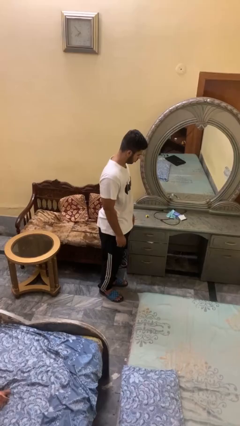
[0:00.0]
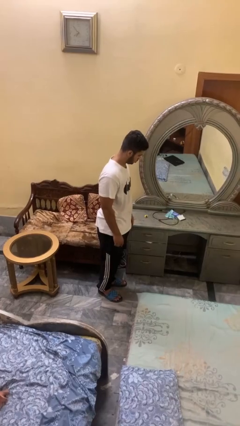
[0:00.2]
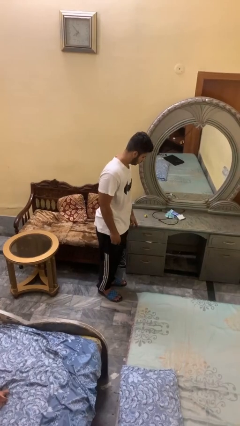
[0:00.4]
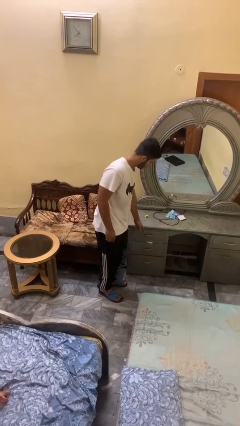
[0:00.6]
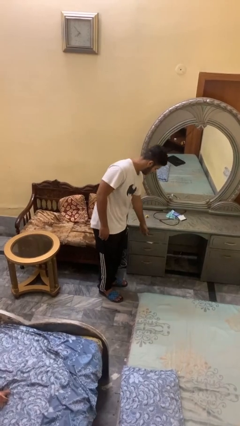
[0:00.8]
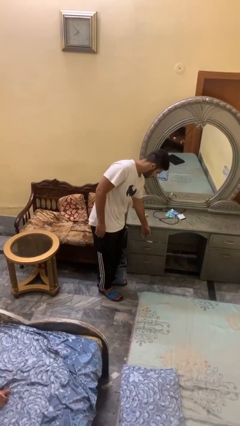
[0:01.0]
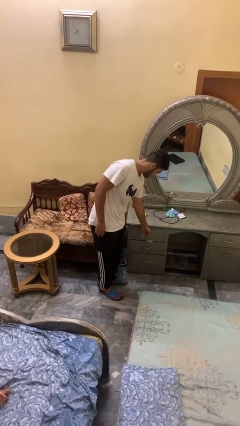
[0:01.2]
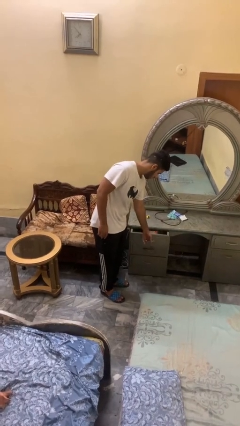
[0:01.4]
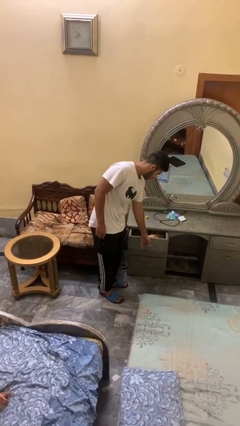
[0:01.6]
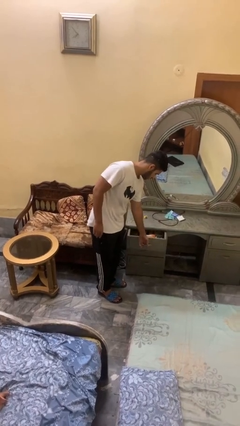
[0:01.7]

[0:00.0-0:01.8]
person opens dresser drawer

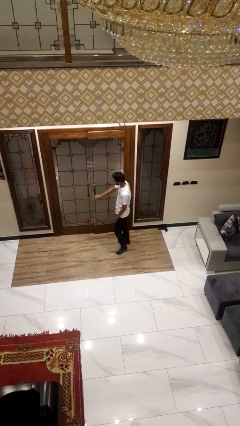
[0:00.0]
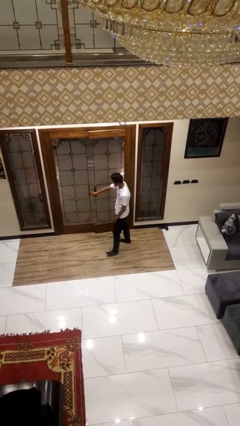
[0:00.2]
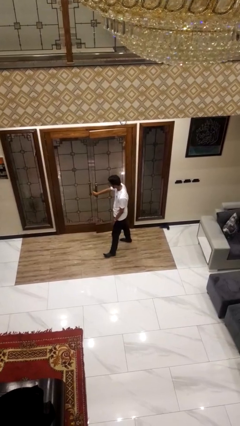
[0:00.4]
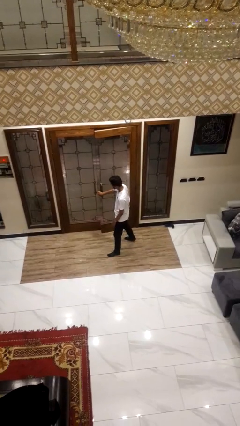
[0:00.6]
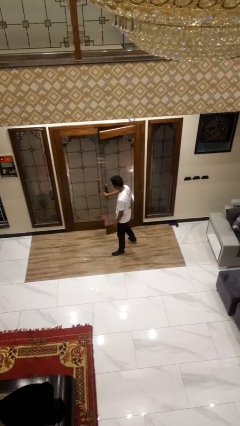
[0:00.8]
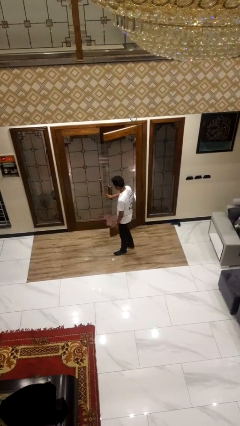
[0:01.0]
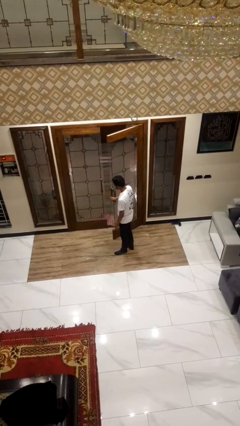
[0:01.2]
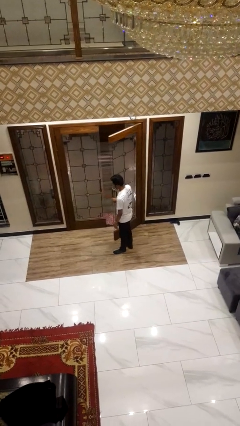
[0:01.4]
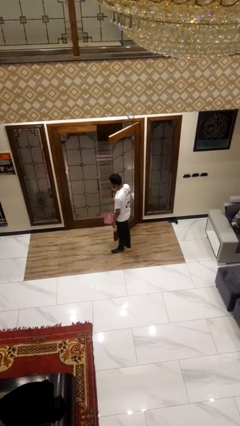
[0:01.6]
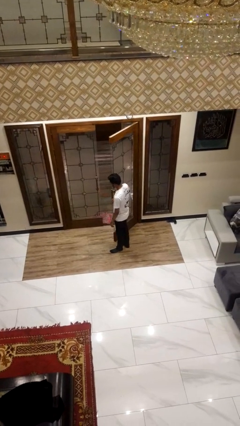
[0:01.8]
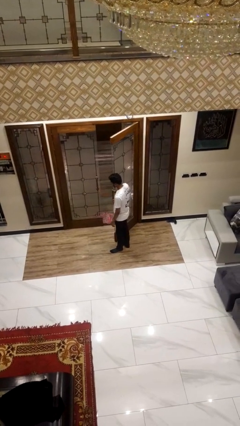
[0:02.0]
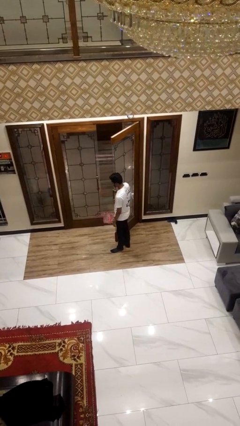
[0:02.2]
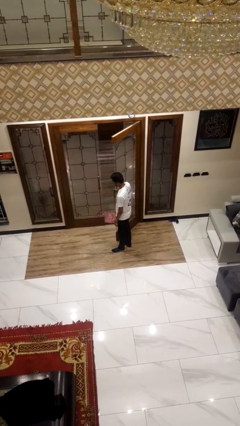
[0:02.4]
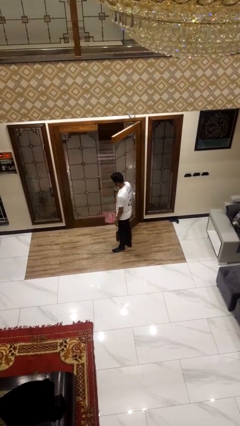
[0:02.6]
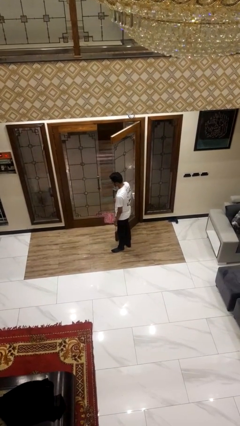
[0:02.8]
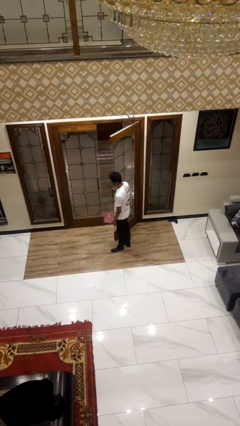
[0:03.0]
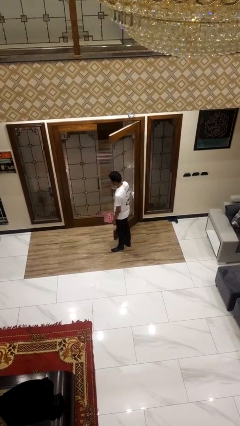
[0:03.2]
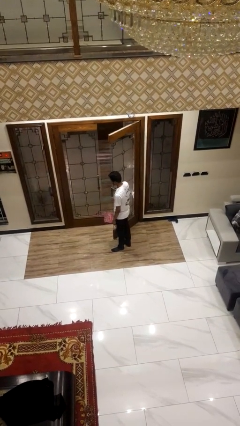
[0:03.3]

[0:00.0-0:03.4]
person opens facility door

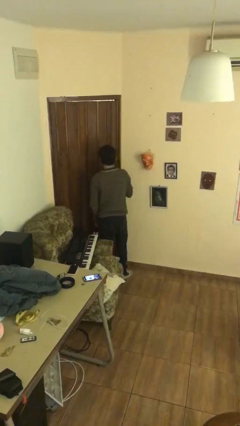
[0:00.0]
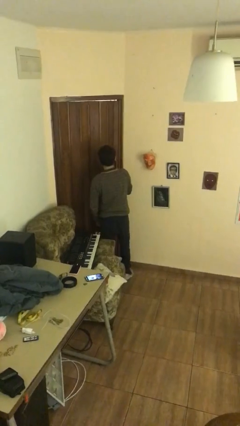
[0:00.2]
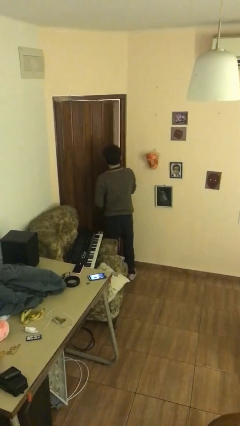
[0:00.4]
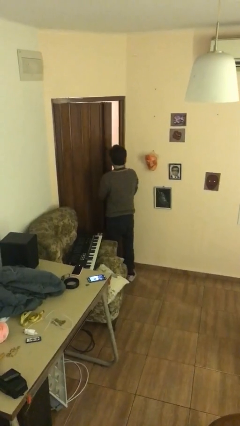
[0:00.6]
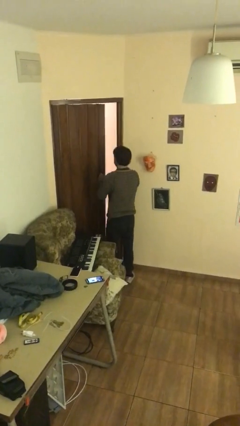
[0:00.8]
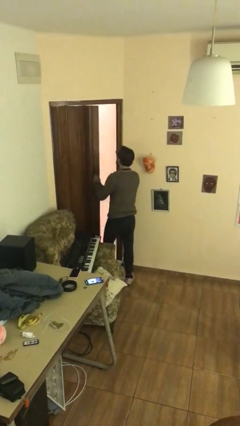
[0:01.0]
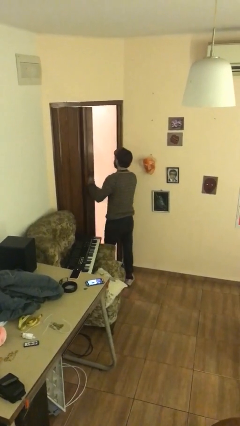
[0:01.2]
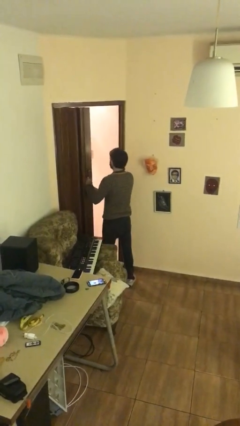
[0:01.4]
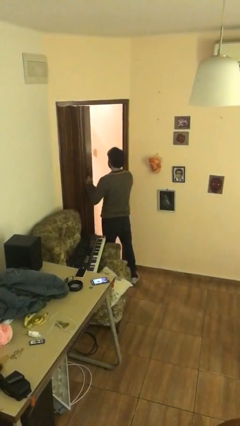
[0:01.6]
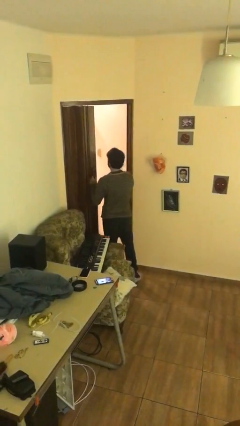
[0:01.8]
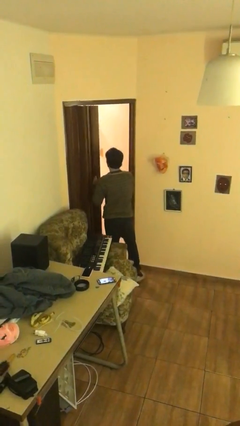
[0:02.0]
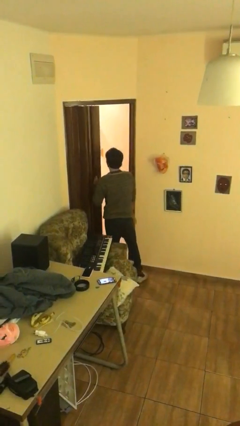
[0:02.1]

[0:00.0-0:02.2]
person opens sliding door

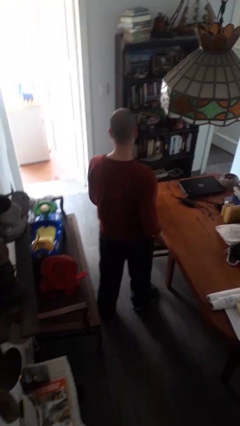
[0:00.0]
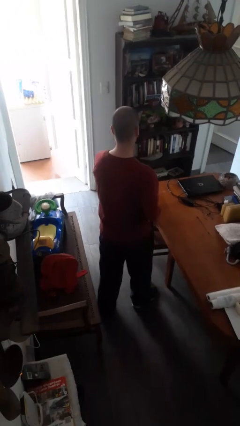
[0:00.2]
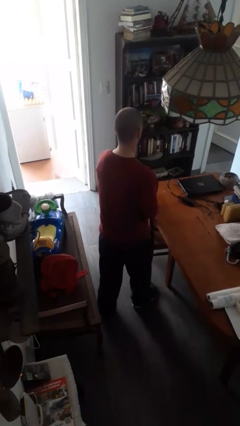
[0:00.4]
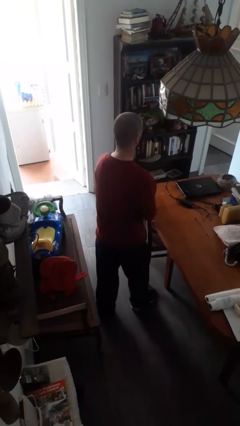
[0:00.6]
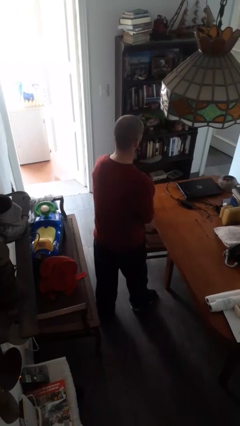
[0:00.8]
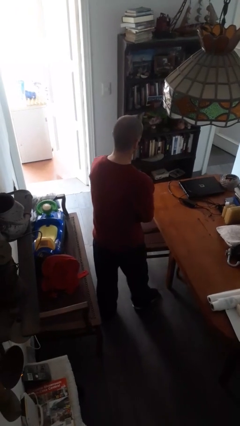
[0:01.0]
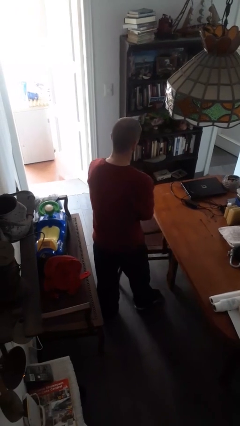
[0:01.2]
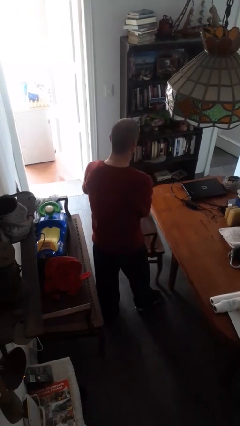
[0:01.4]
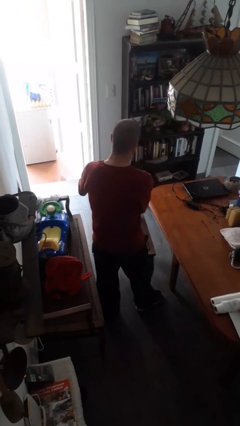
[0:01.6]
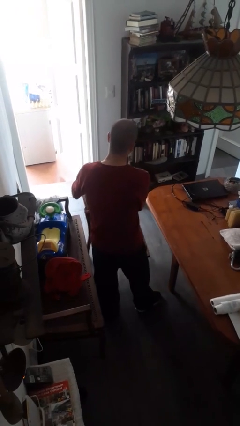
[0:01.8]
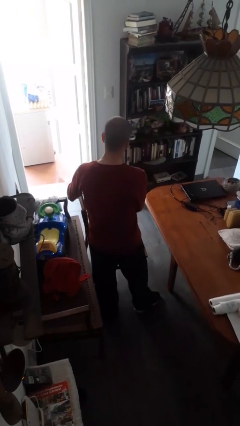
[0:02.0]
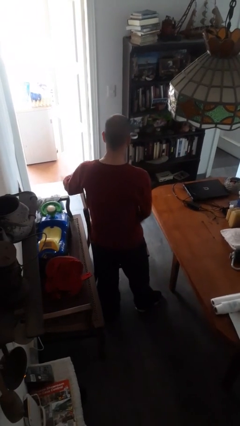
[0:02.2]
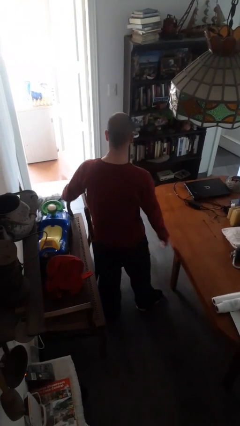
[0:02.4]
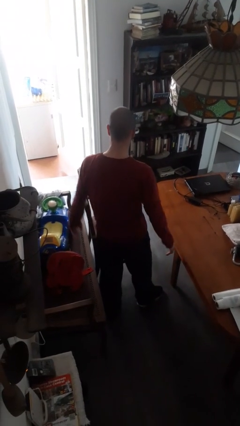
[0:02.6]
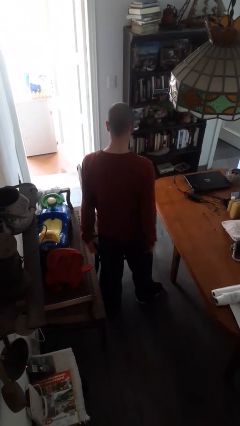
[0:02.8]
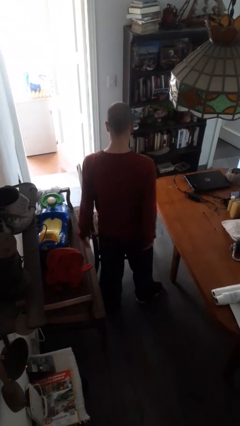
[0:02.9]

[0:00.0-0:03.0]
person pulls out chair

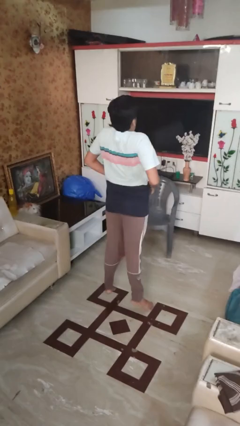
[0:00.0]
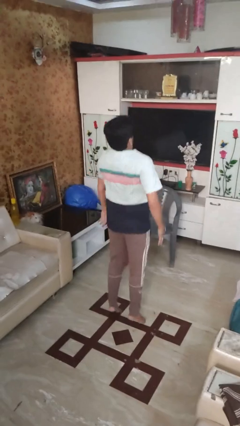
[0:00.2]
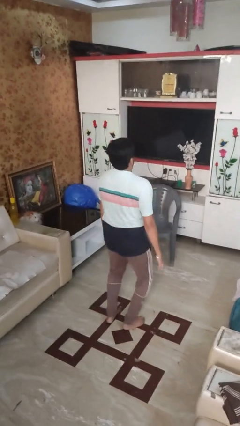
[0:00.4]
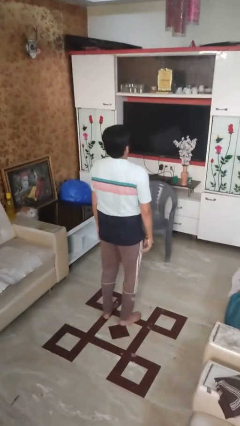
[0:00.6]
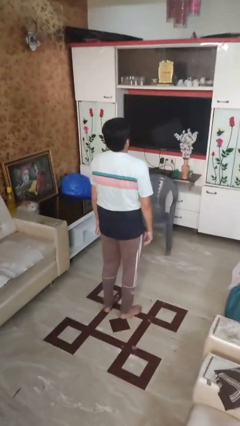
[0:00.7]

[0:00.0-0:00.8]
person somersaults

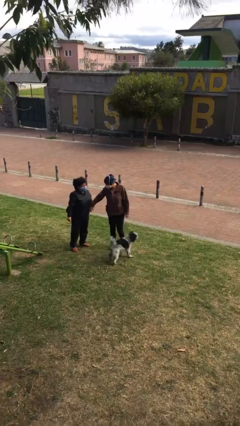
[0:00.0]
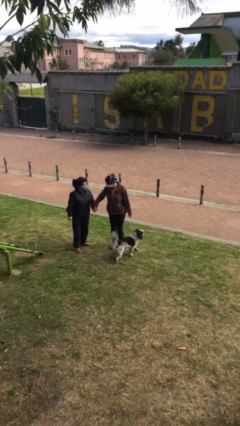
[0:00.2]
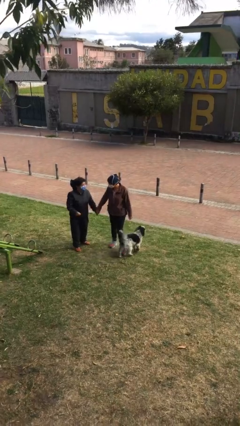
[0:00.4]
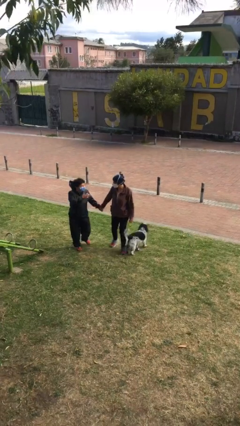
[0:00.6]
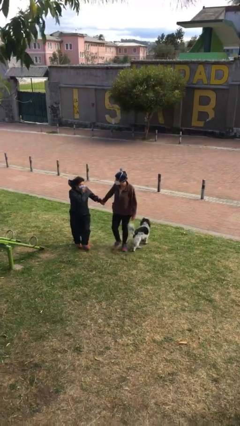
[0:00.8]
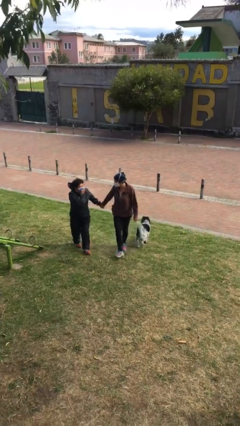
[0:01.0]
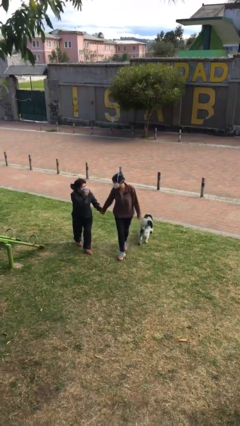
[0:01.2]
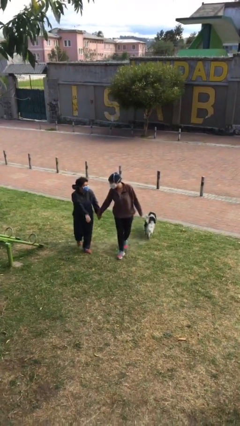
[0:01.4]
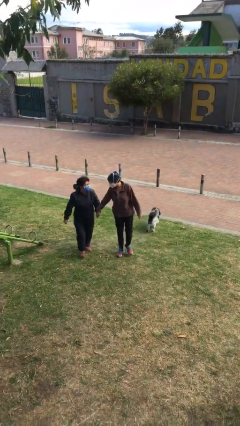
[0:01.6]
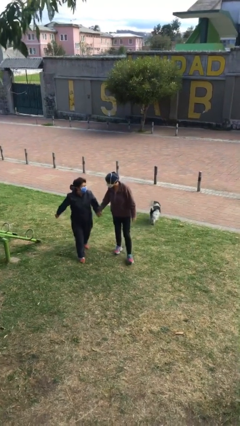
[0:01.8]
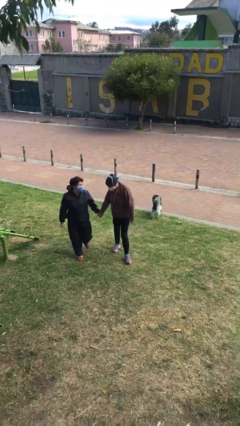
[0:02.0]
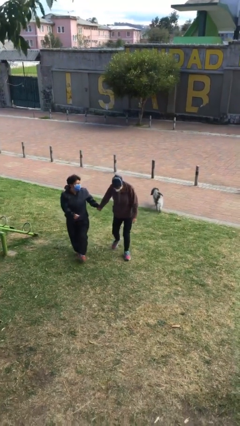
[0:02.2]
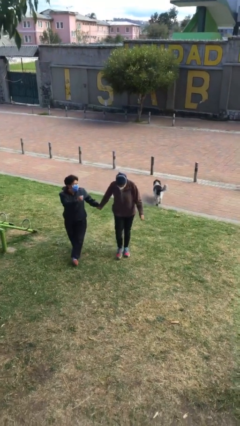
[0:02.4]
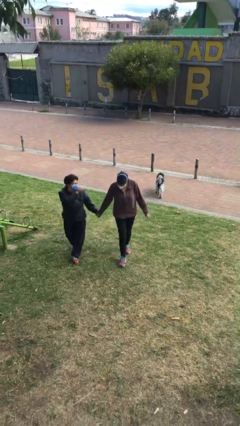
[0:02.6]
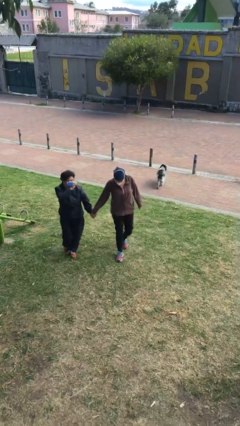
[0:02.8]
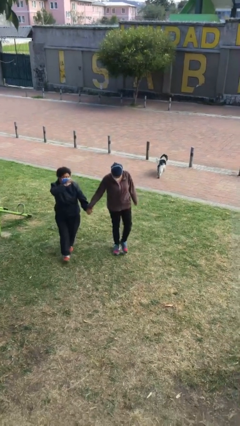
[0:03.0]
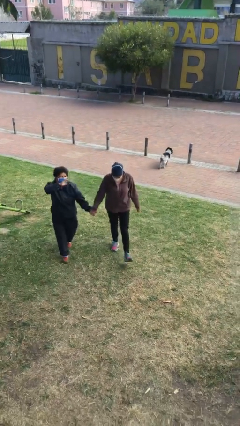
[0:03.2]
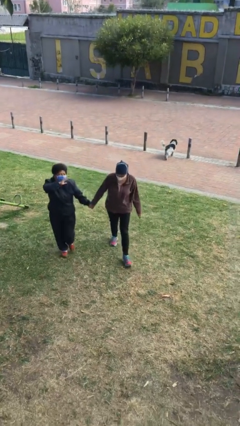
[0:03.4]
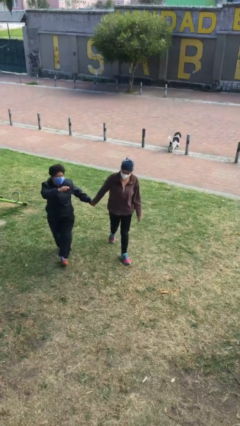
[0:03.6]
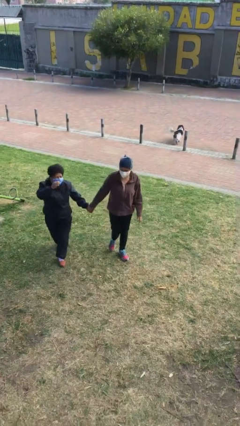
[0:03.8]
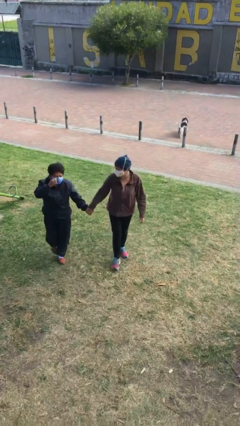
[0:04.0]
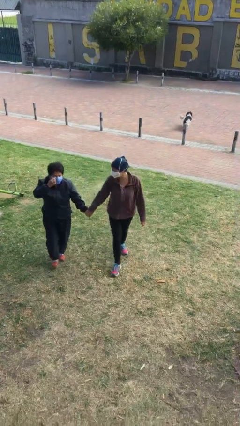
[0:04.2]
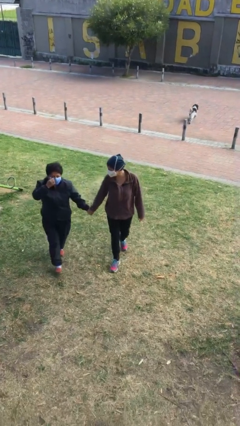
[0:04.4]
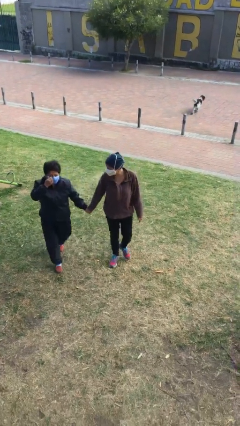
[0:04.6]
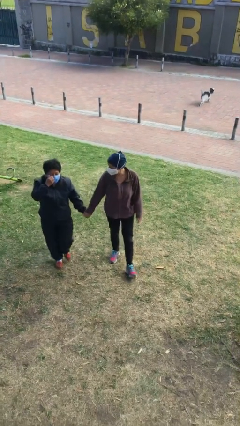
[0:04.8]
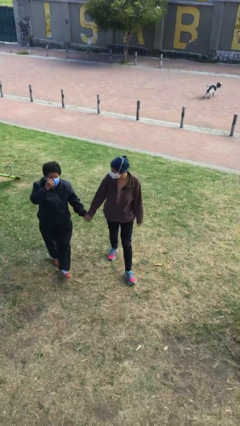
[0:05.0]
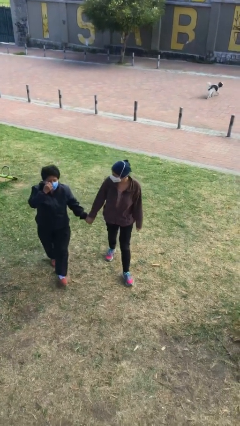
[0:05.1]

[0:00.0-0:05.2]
person holds hand

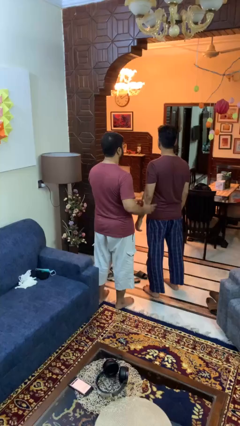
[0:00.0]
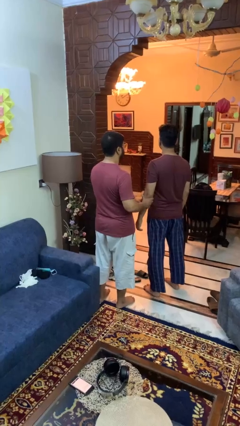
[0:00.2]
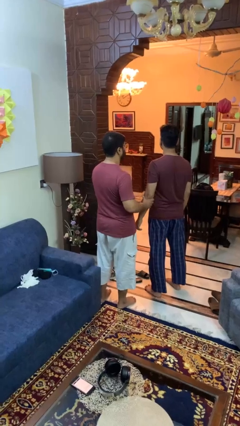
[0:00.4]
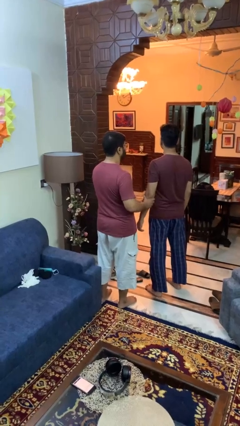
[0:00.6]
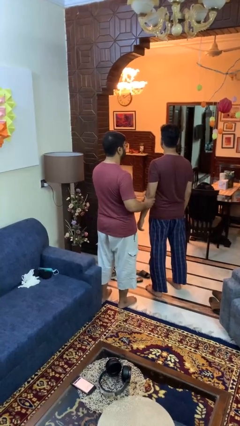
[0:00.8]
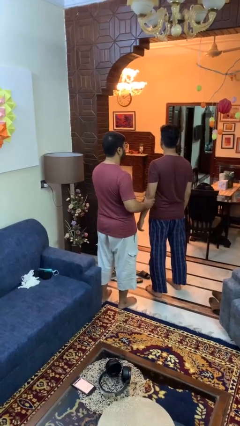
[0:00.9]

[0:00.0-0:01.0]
person grabs person by forearm
